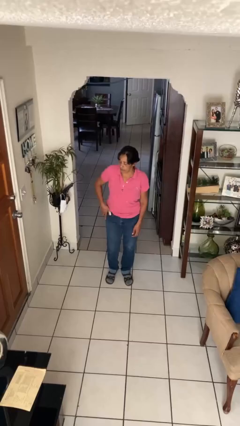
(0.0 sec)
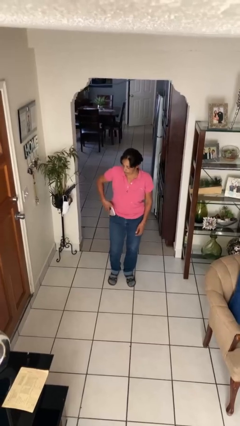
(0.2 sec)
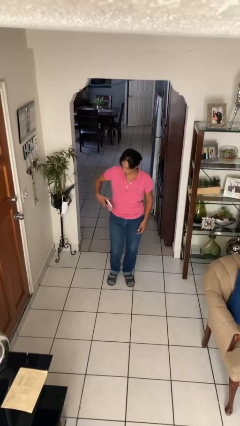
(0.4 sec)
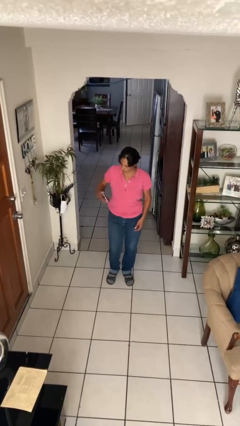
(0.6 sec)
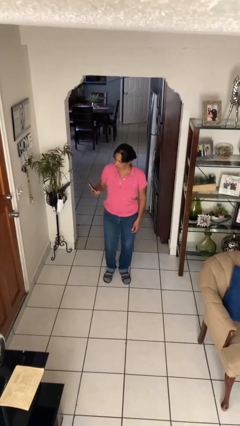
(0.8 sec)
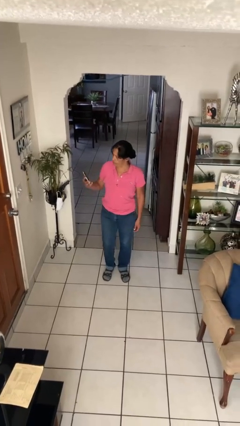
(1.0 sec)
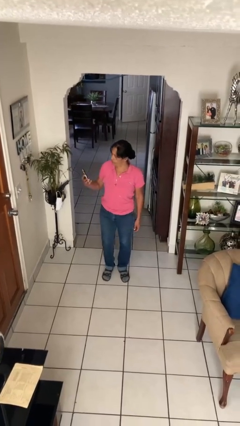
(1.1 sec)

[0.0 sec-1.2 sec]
person takes phone from pocket

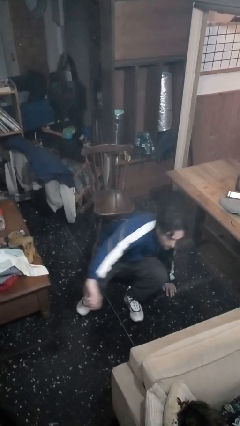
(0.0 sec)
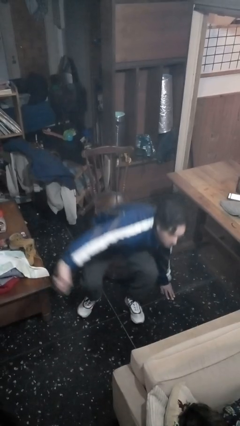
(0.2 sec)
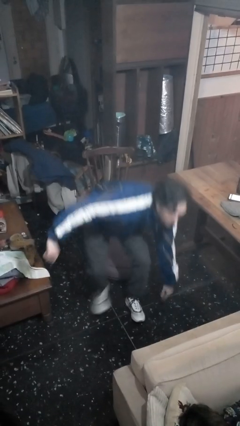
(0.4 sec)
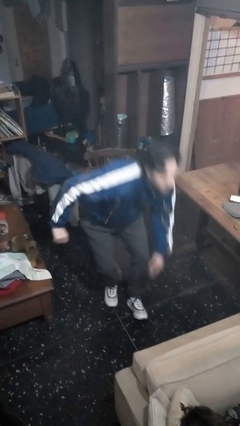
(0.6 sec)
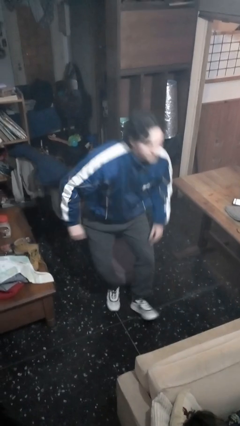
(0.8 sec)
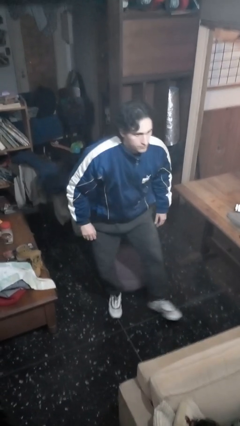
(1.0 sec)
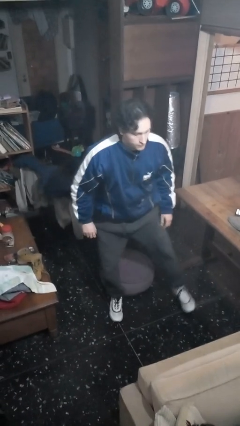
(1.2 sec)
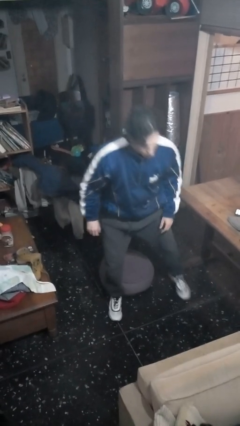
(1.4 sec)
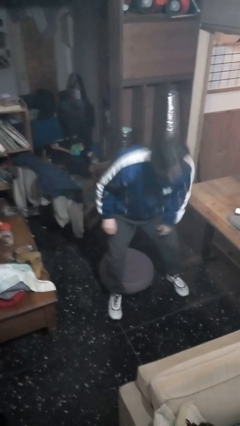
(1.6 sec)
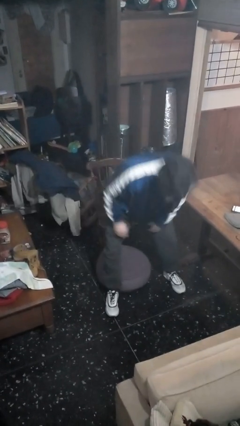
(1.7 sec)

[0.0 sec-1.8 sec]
person stands up from floor

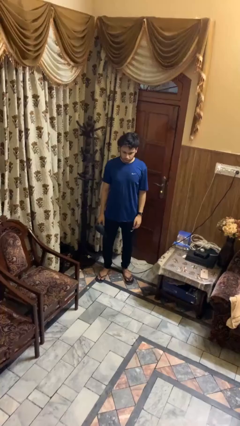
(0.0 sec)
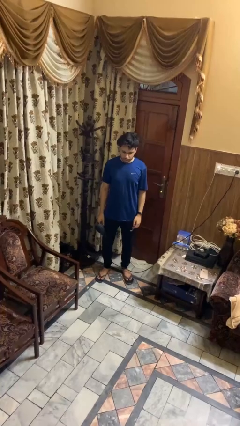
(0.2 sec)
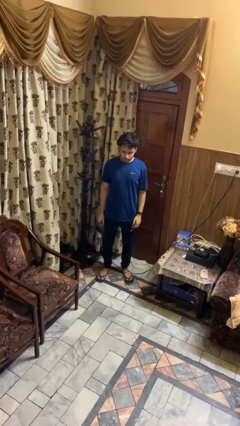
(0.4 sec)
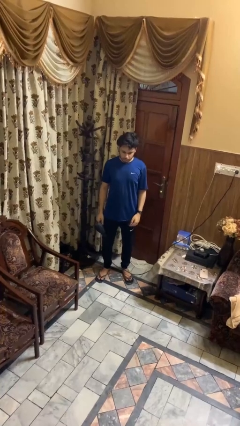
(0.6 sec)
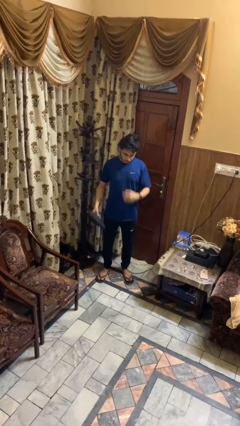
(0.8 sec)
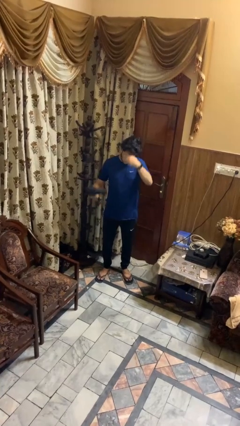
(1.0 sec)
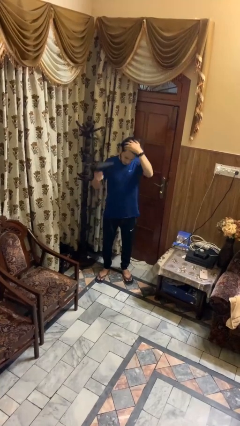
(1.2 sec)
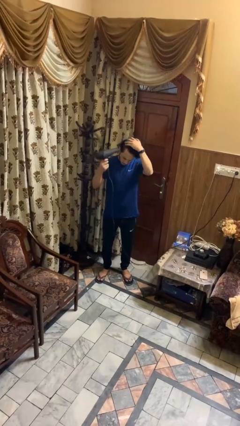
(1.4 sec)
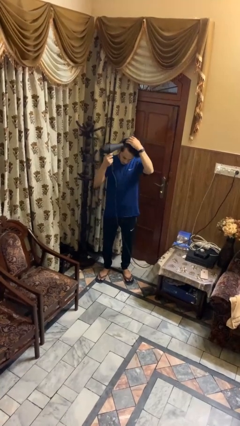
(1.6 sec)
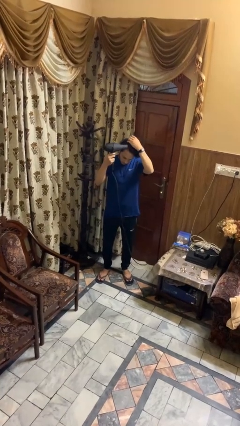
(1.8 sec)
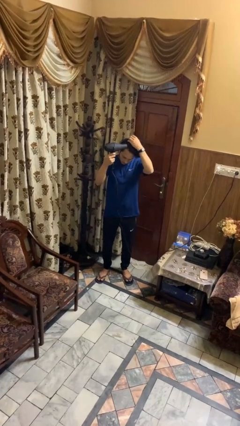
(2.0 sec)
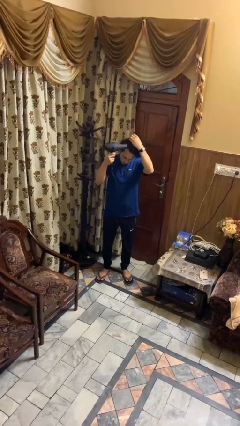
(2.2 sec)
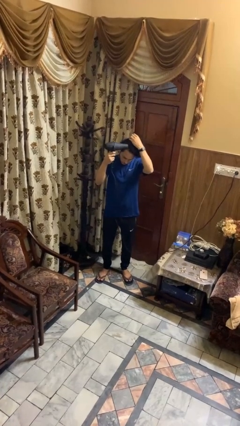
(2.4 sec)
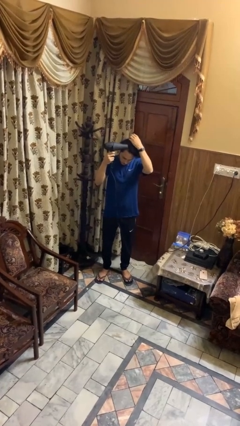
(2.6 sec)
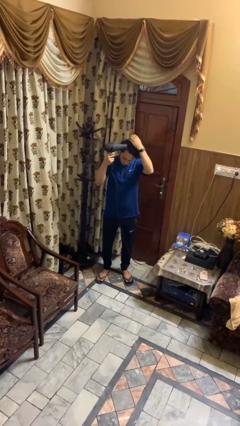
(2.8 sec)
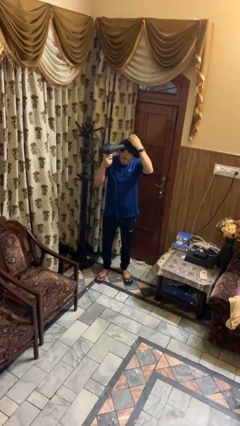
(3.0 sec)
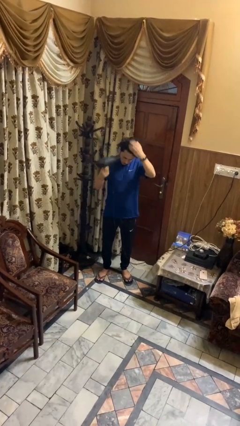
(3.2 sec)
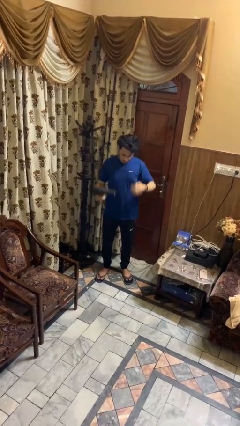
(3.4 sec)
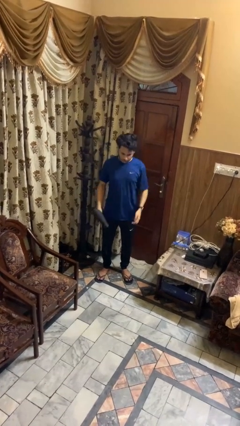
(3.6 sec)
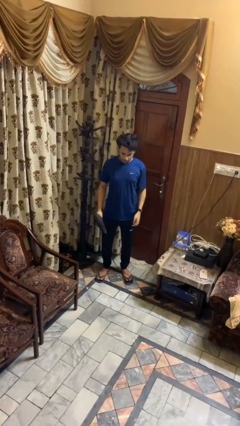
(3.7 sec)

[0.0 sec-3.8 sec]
person dries hair with hairdryer

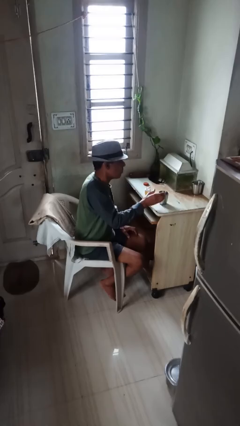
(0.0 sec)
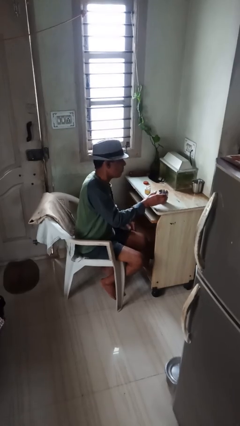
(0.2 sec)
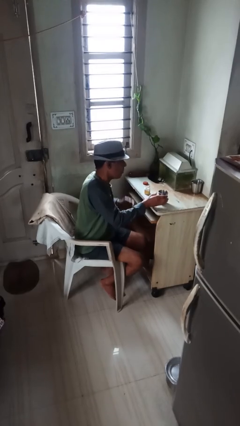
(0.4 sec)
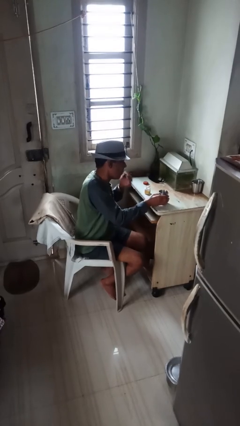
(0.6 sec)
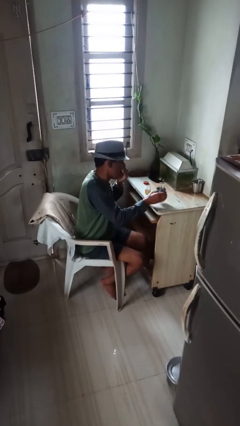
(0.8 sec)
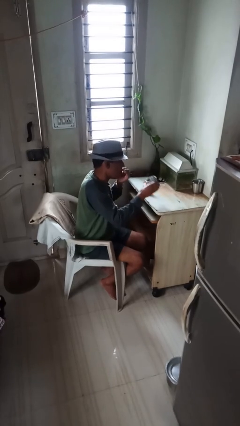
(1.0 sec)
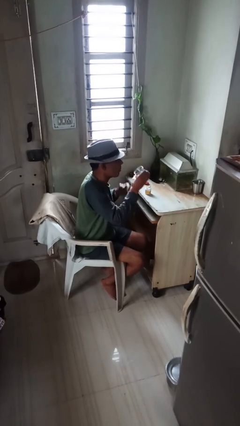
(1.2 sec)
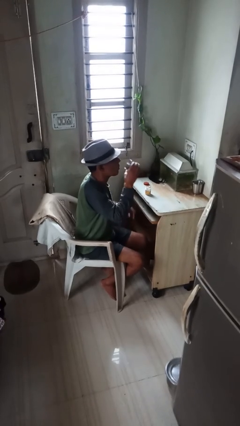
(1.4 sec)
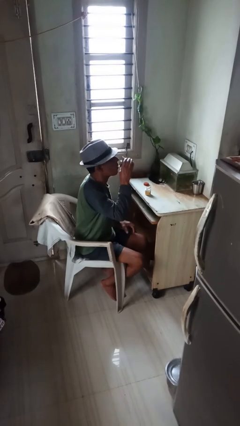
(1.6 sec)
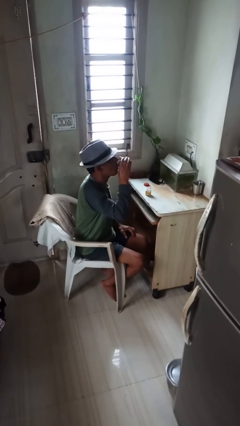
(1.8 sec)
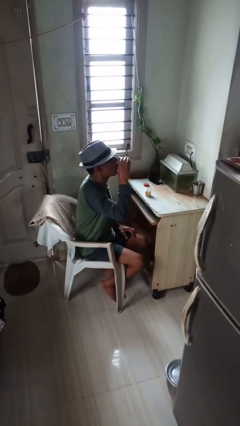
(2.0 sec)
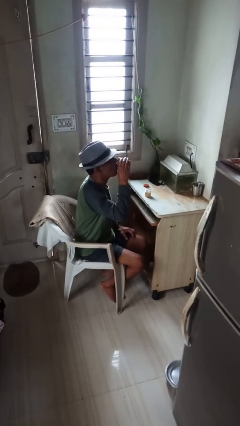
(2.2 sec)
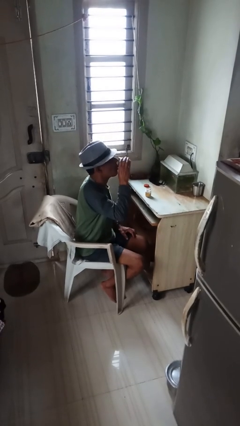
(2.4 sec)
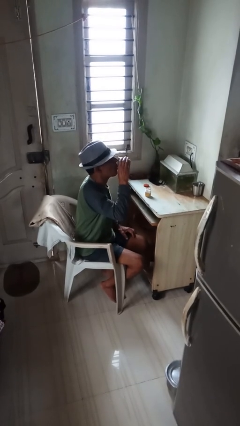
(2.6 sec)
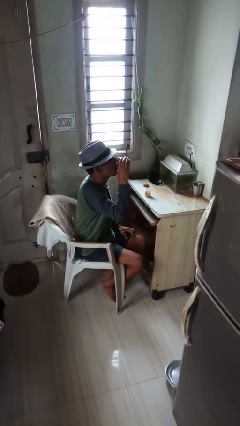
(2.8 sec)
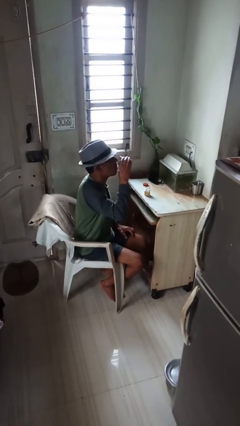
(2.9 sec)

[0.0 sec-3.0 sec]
person drinks from cup

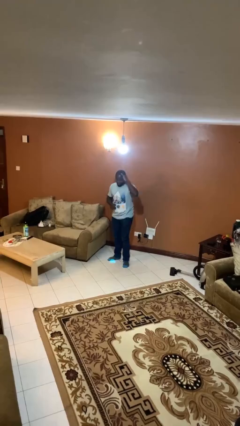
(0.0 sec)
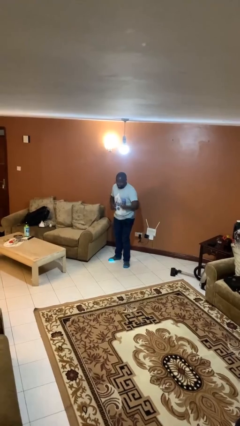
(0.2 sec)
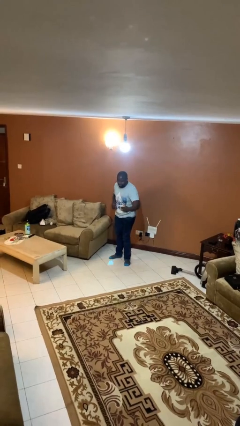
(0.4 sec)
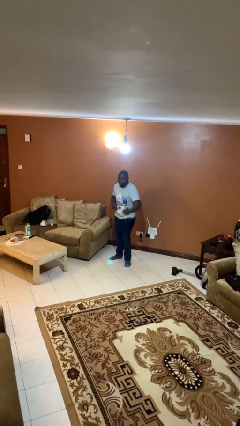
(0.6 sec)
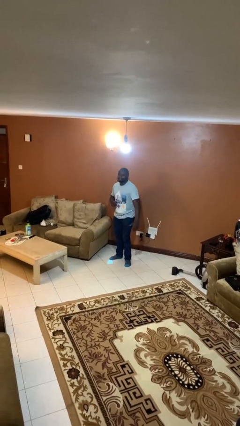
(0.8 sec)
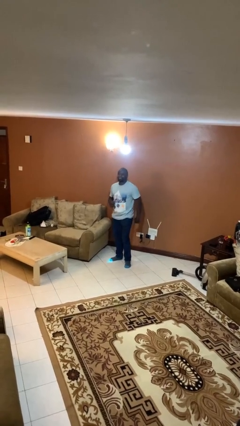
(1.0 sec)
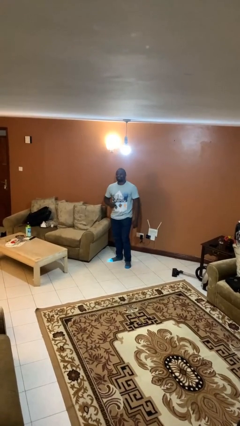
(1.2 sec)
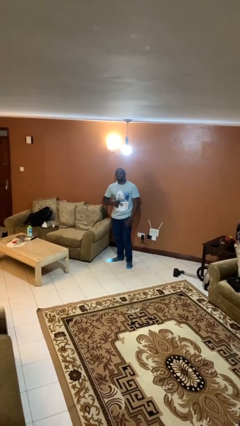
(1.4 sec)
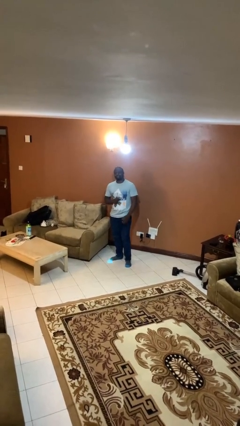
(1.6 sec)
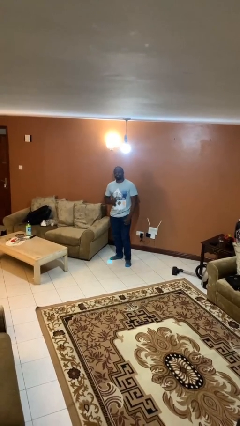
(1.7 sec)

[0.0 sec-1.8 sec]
person karate chop

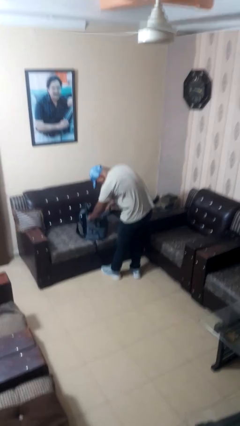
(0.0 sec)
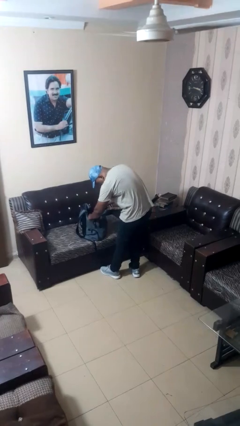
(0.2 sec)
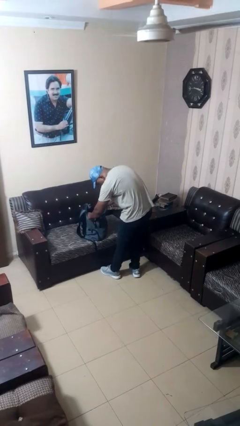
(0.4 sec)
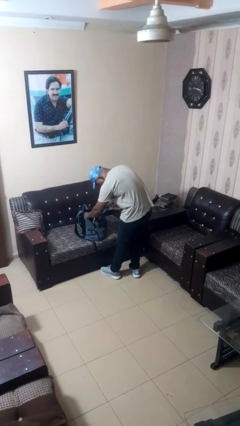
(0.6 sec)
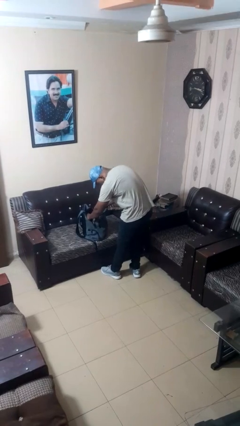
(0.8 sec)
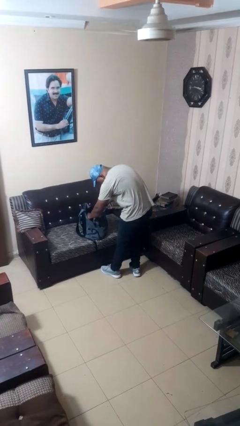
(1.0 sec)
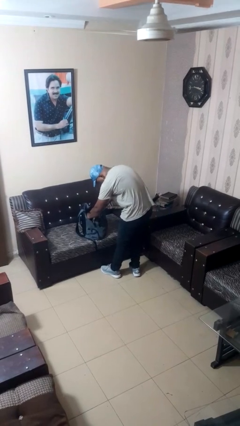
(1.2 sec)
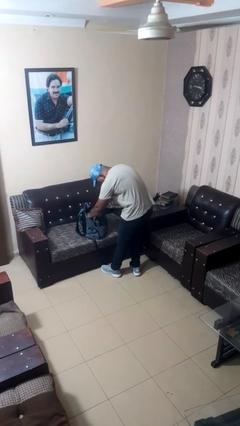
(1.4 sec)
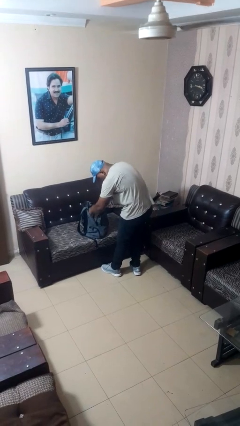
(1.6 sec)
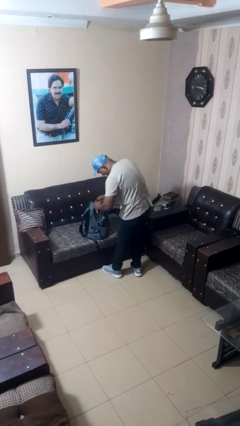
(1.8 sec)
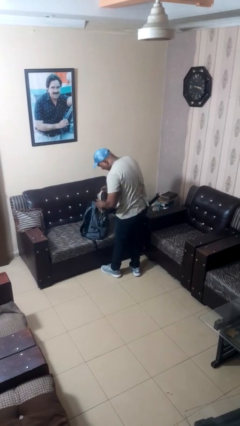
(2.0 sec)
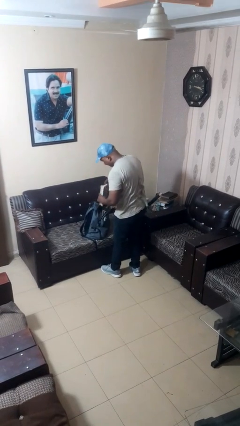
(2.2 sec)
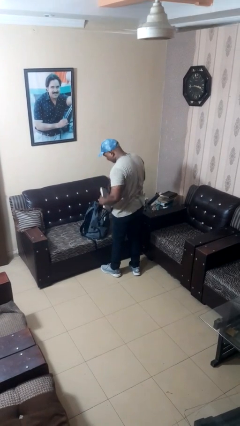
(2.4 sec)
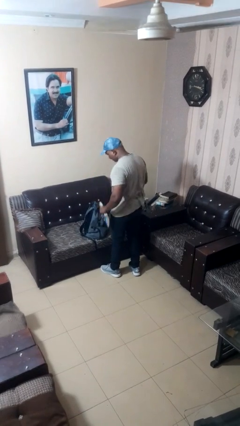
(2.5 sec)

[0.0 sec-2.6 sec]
person searches in backpack

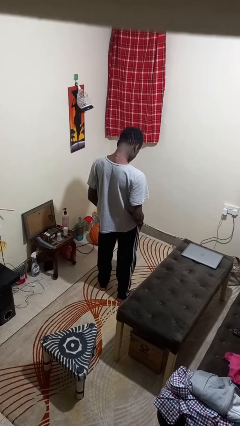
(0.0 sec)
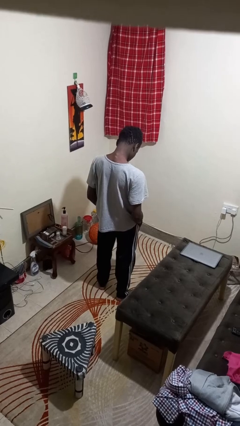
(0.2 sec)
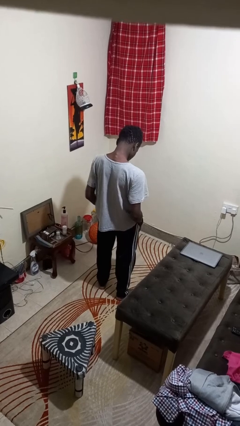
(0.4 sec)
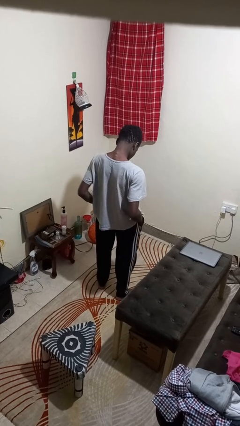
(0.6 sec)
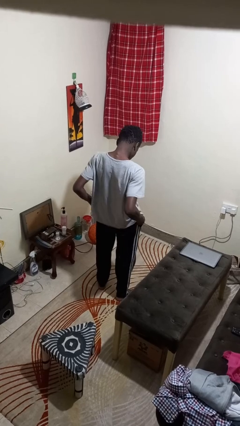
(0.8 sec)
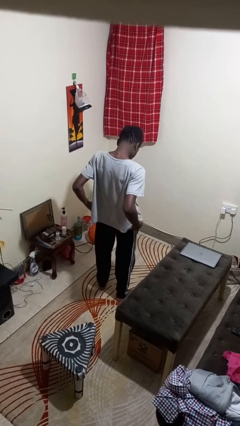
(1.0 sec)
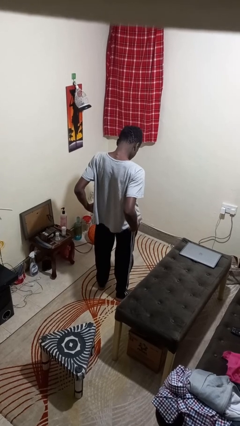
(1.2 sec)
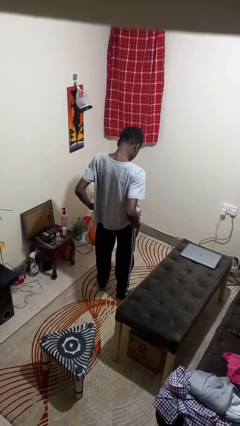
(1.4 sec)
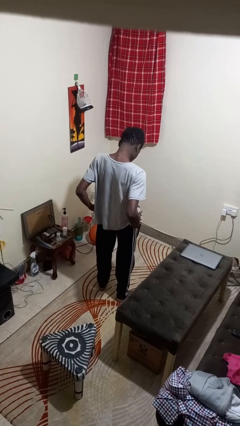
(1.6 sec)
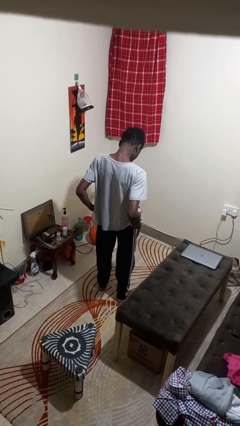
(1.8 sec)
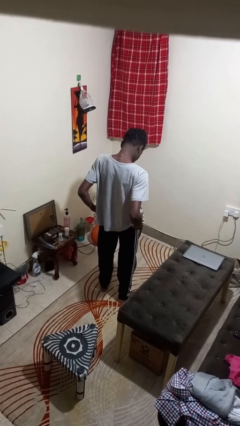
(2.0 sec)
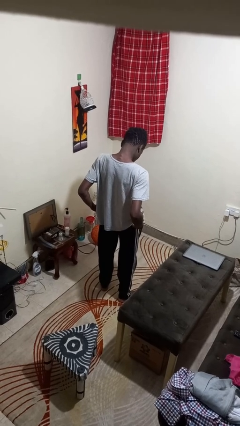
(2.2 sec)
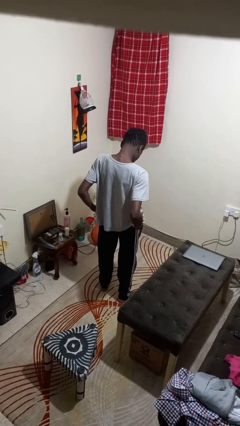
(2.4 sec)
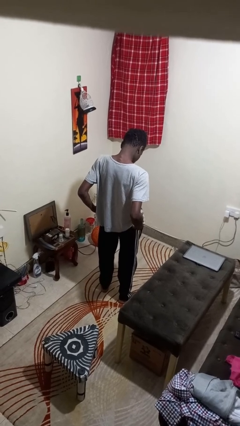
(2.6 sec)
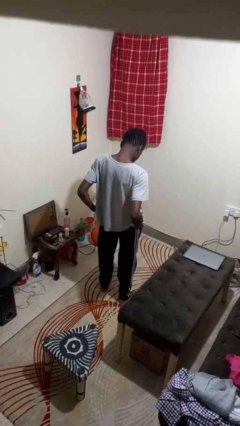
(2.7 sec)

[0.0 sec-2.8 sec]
person puts hands in back pockets
